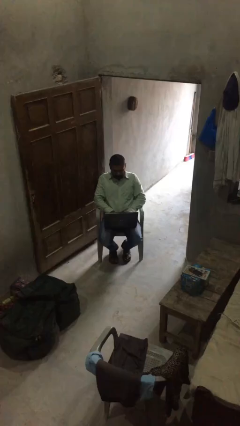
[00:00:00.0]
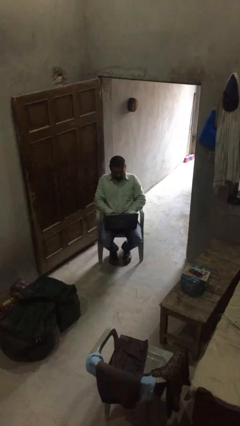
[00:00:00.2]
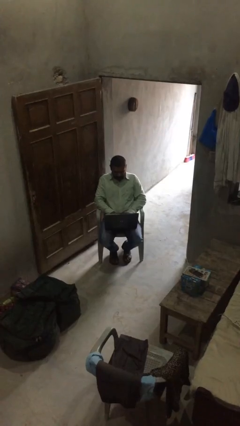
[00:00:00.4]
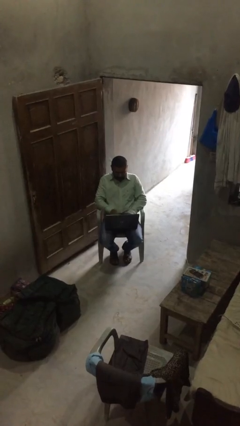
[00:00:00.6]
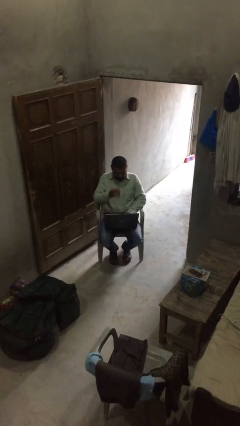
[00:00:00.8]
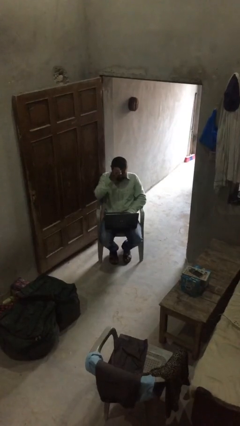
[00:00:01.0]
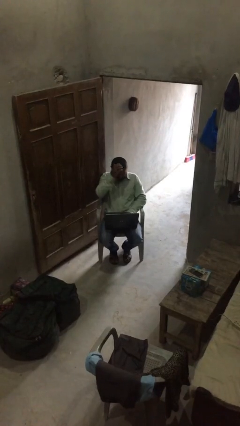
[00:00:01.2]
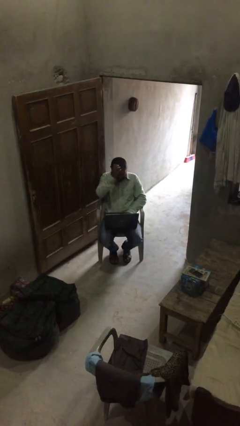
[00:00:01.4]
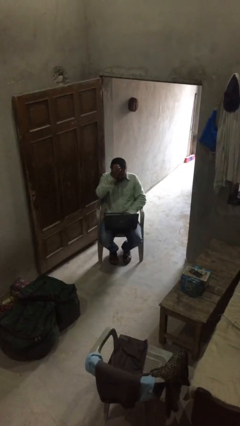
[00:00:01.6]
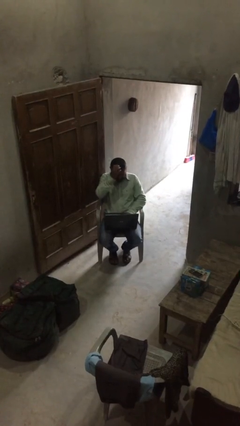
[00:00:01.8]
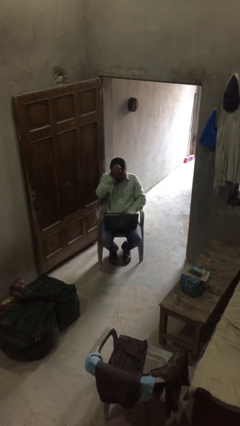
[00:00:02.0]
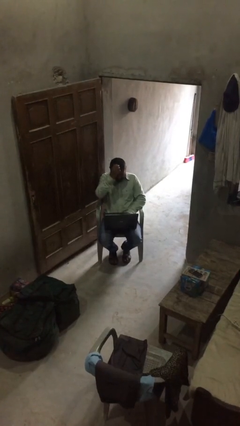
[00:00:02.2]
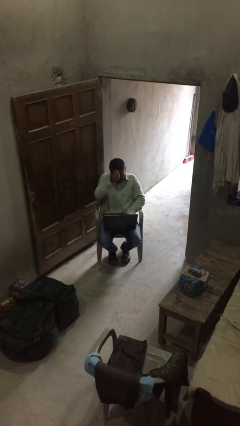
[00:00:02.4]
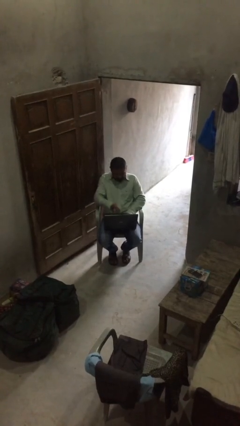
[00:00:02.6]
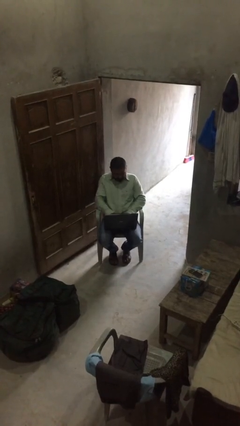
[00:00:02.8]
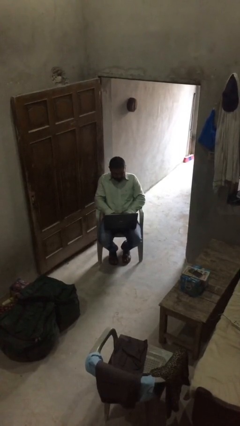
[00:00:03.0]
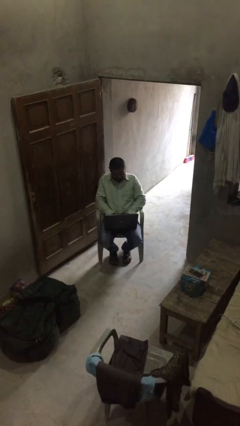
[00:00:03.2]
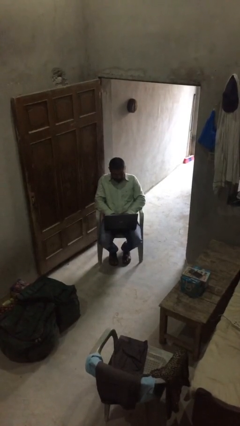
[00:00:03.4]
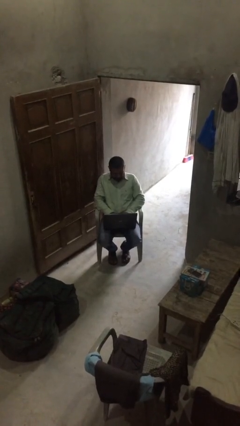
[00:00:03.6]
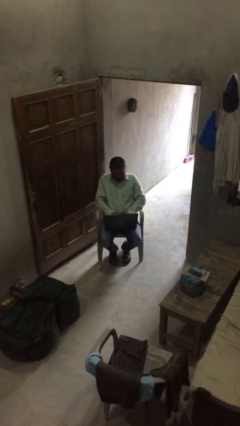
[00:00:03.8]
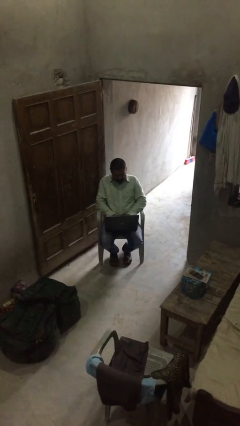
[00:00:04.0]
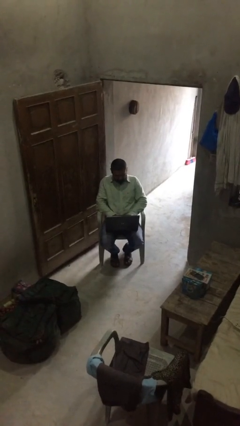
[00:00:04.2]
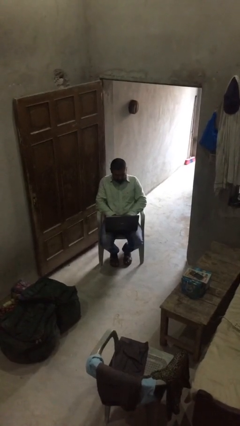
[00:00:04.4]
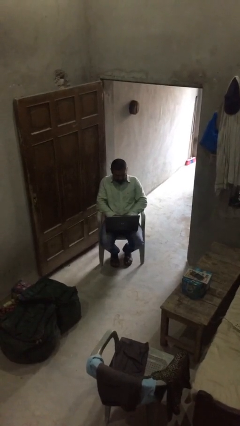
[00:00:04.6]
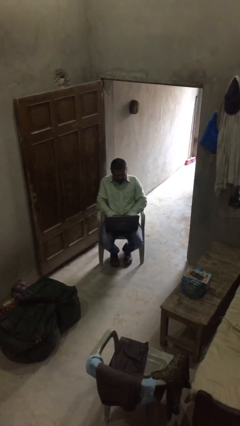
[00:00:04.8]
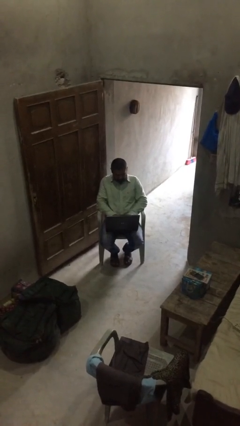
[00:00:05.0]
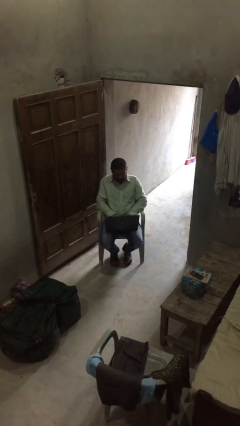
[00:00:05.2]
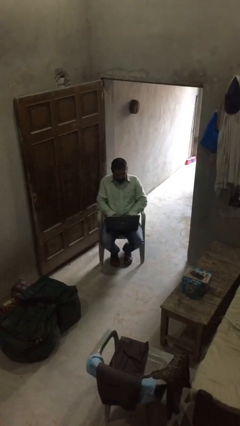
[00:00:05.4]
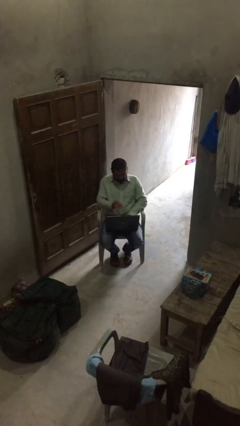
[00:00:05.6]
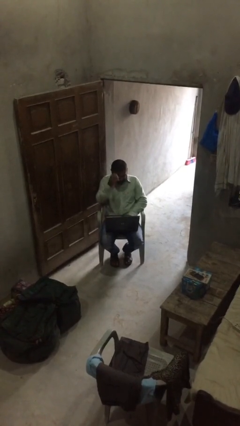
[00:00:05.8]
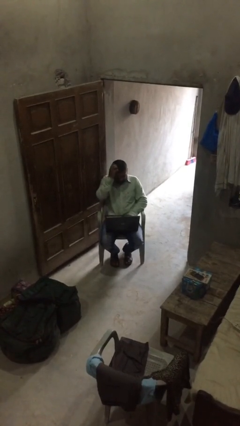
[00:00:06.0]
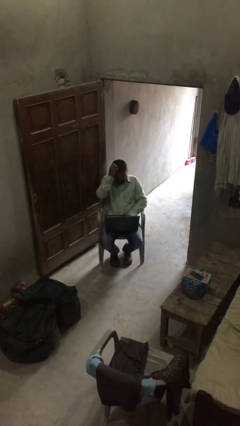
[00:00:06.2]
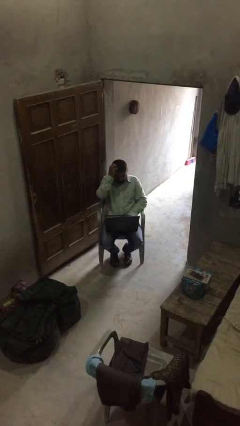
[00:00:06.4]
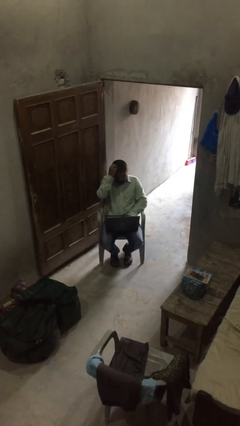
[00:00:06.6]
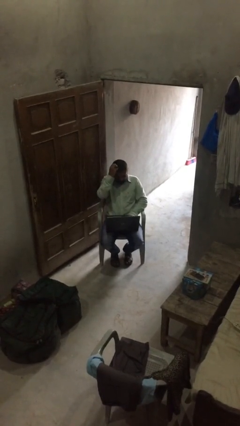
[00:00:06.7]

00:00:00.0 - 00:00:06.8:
person interacts with laptop

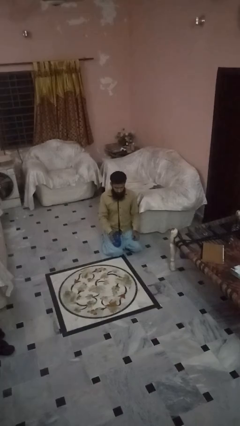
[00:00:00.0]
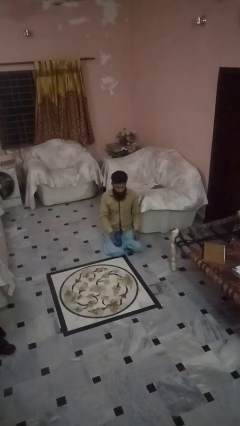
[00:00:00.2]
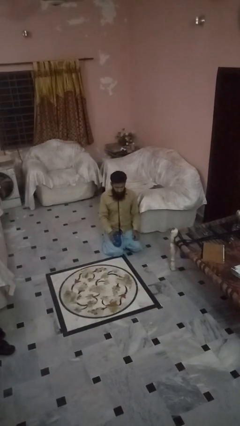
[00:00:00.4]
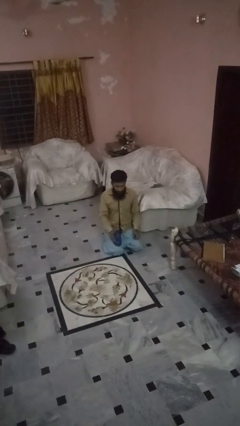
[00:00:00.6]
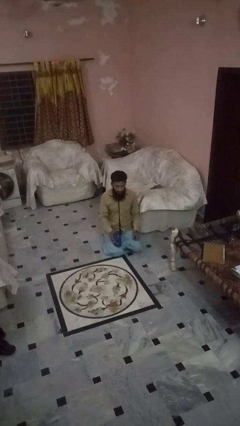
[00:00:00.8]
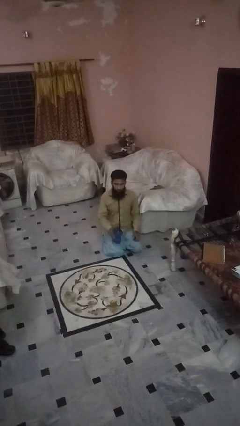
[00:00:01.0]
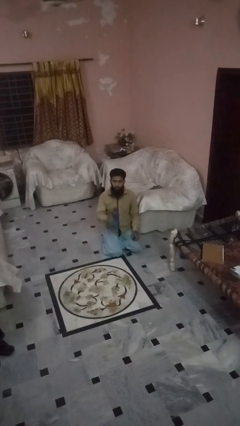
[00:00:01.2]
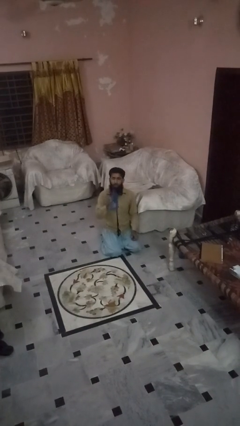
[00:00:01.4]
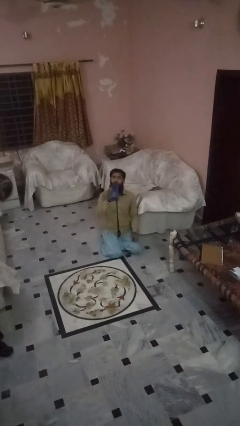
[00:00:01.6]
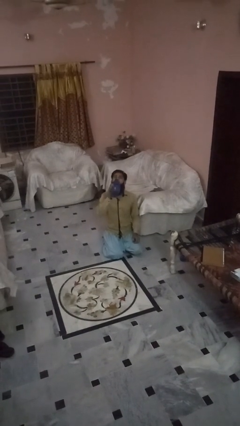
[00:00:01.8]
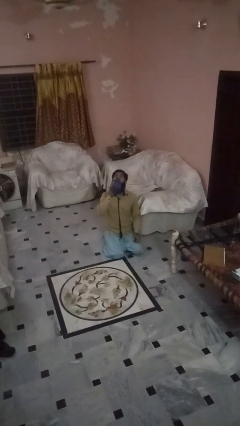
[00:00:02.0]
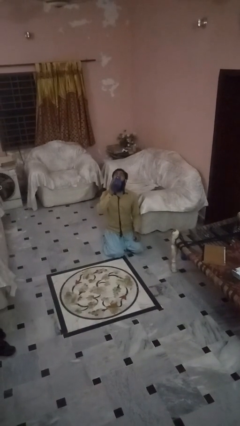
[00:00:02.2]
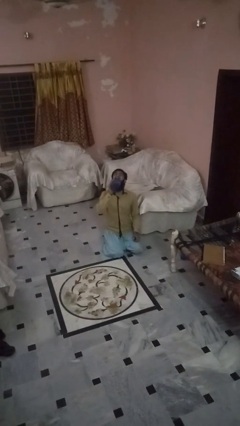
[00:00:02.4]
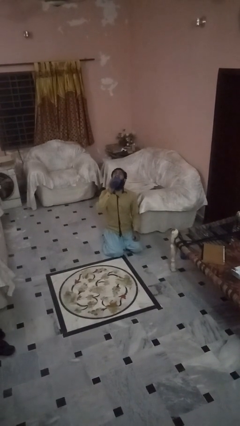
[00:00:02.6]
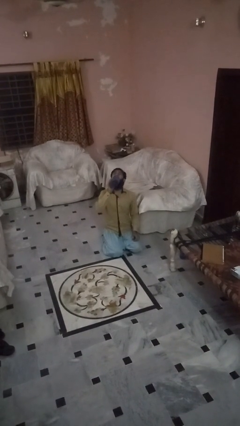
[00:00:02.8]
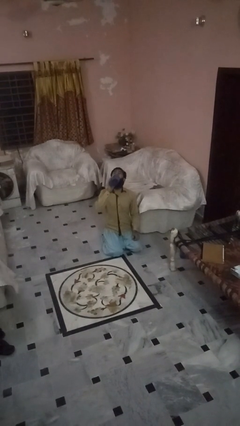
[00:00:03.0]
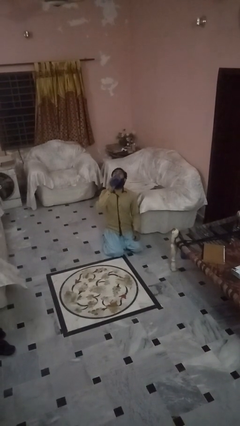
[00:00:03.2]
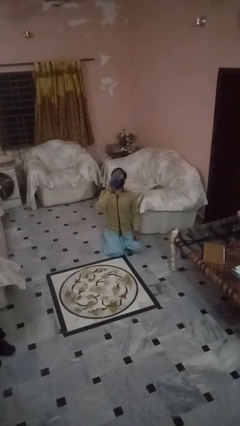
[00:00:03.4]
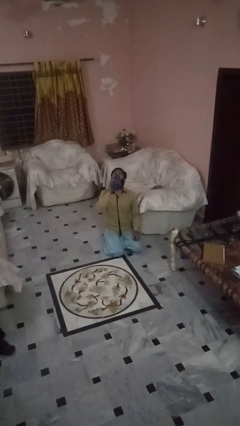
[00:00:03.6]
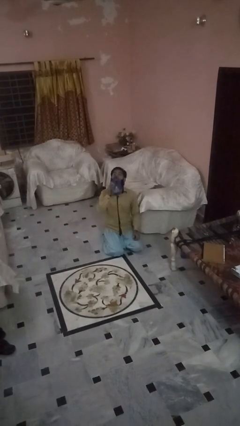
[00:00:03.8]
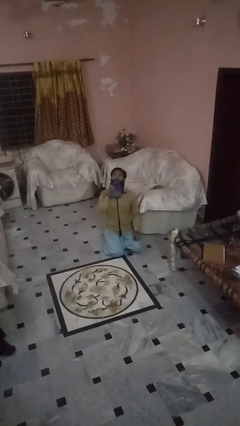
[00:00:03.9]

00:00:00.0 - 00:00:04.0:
person drinks from bottle

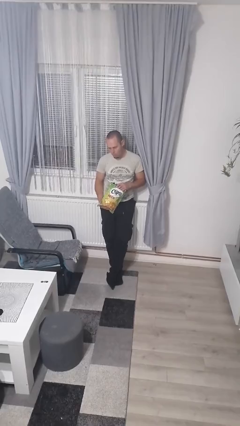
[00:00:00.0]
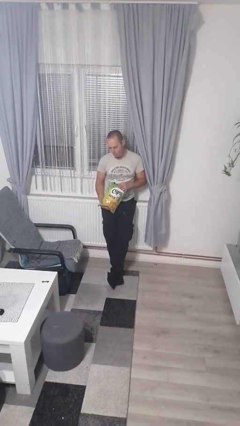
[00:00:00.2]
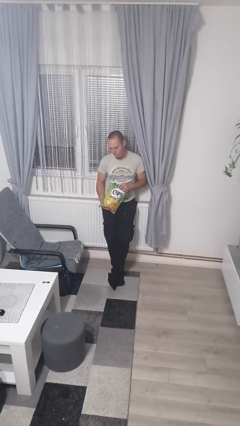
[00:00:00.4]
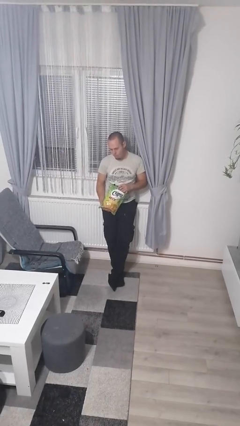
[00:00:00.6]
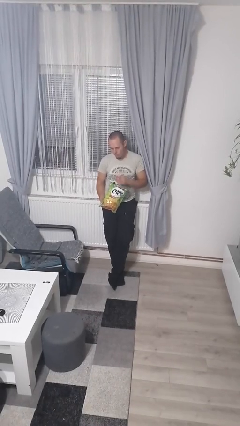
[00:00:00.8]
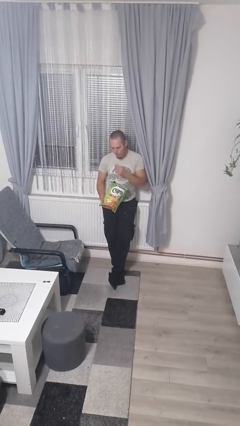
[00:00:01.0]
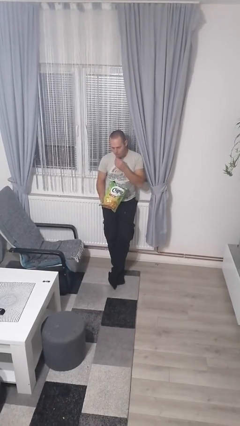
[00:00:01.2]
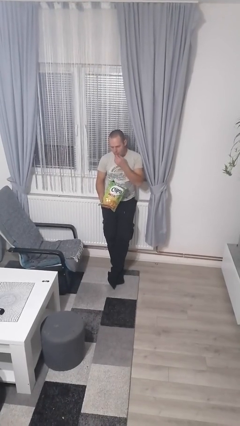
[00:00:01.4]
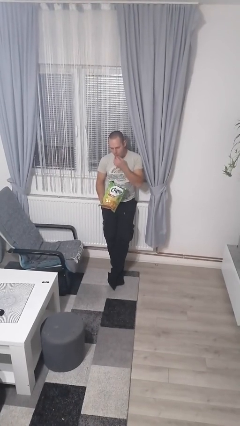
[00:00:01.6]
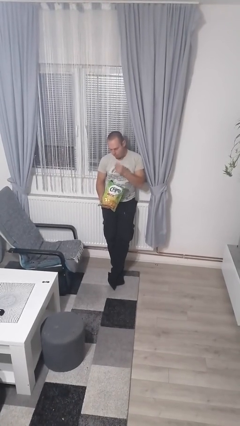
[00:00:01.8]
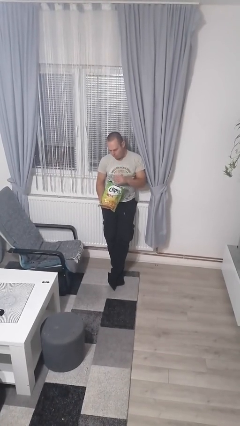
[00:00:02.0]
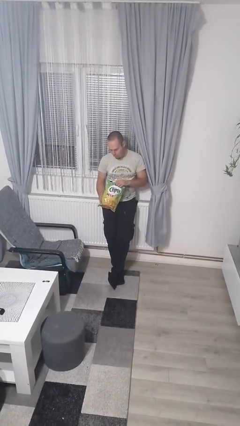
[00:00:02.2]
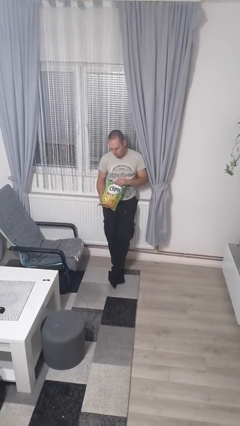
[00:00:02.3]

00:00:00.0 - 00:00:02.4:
person eats snack from bag

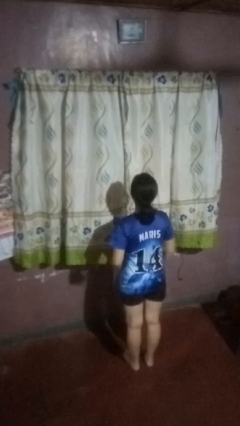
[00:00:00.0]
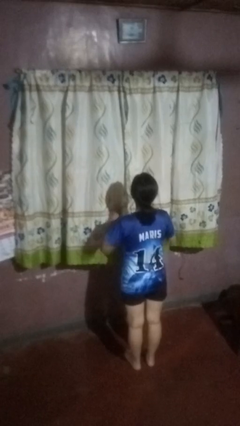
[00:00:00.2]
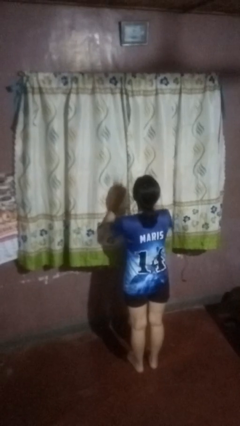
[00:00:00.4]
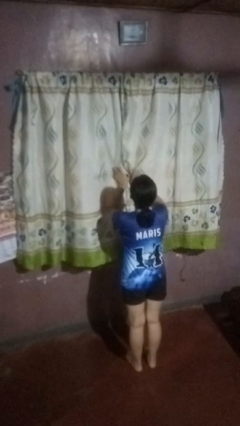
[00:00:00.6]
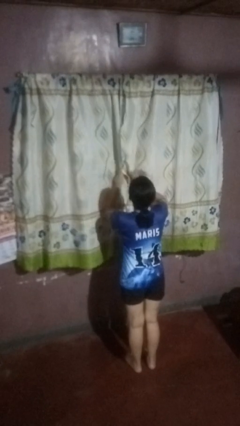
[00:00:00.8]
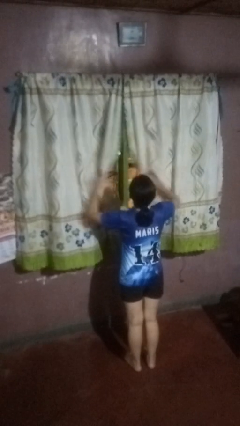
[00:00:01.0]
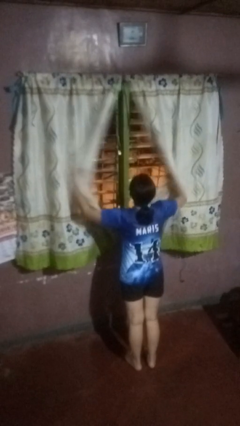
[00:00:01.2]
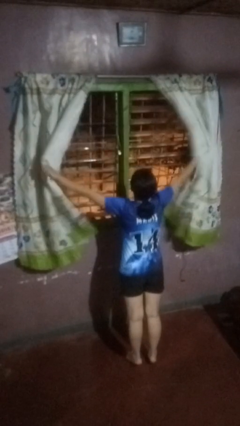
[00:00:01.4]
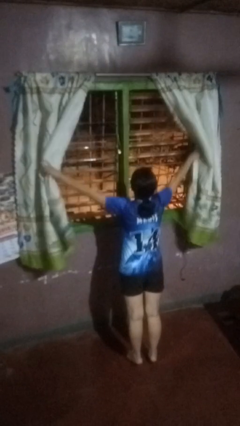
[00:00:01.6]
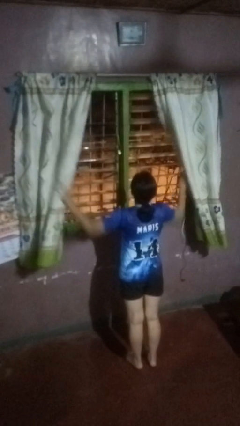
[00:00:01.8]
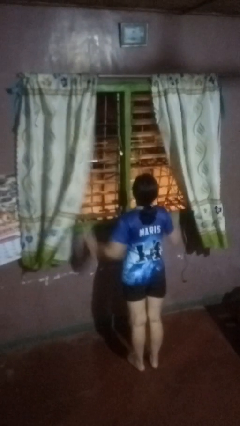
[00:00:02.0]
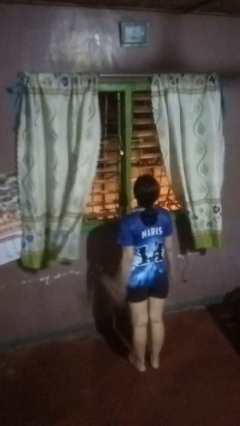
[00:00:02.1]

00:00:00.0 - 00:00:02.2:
person opens curtains

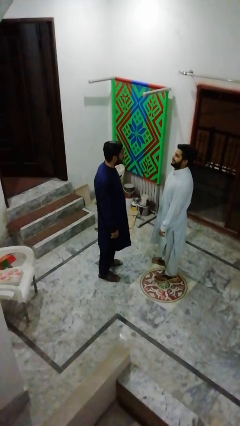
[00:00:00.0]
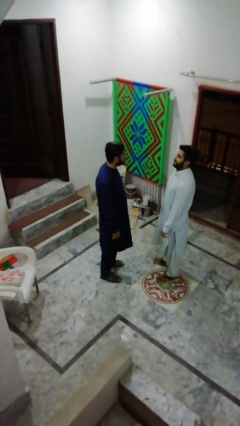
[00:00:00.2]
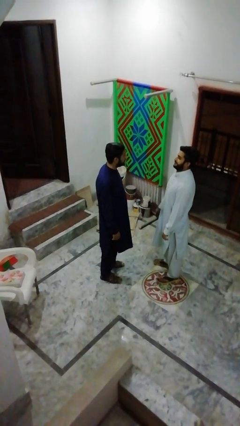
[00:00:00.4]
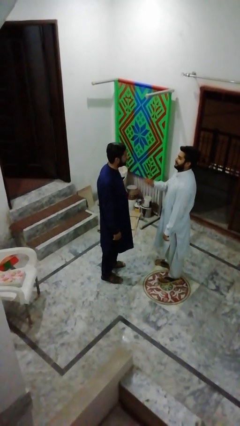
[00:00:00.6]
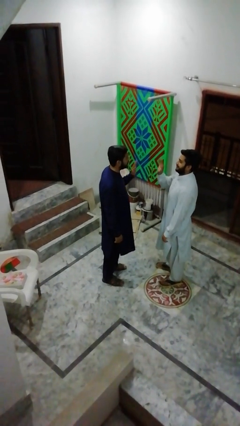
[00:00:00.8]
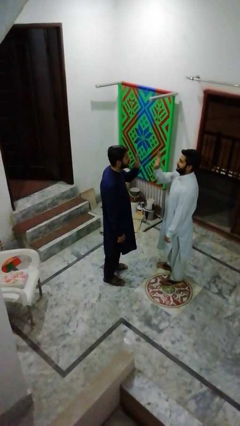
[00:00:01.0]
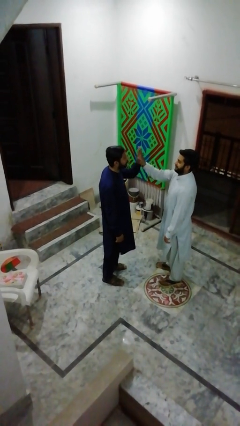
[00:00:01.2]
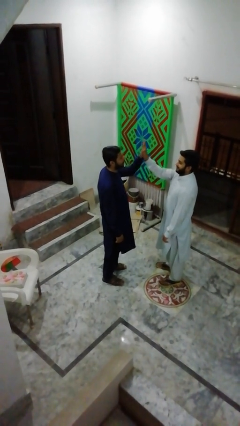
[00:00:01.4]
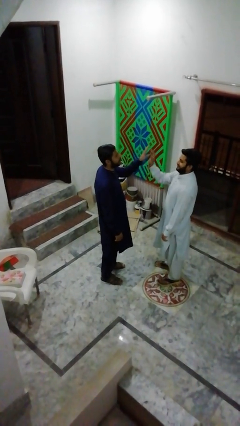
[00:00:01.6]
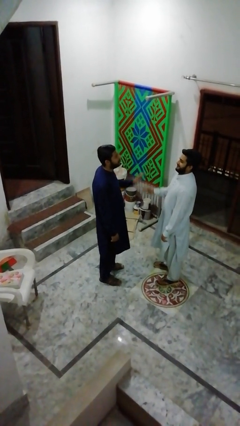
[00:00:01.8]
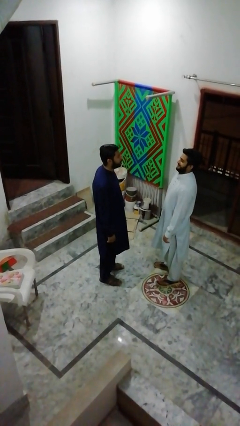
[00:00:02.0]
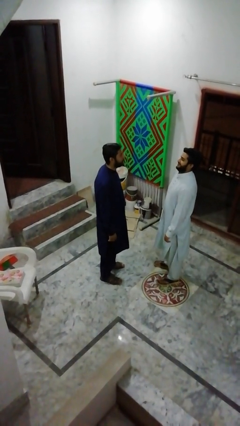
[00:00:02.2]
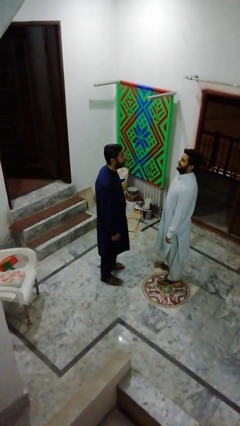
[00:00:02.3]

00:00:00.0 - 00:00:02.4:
person highfives hand
